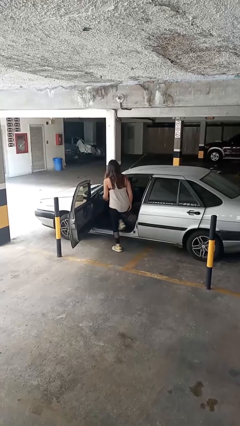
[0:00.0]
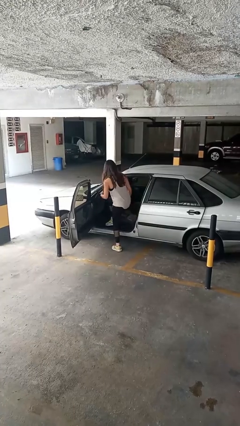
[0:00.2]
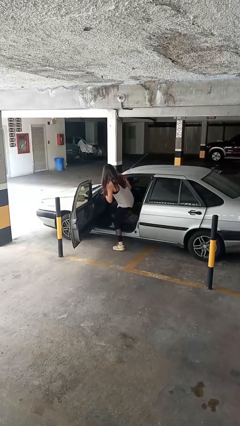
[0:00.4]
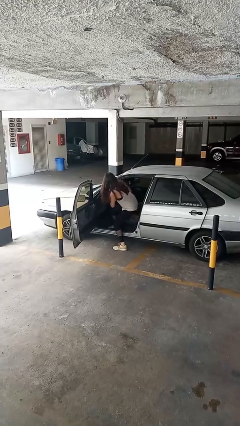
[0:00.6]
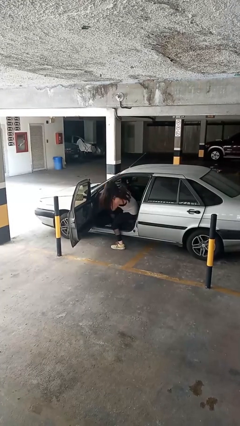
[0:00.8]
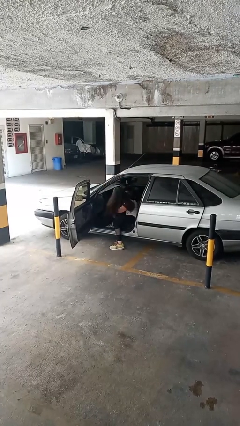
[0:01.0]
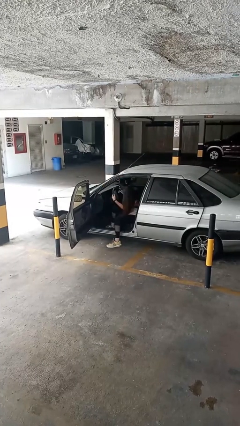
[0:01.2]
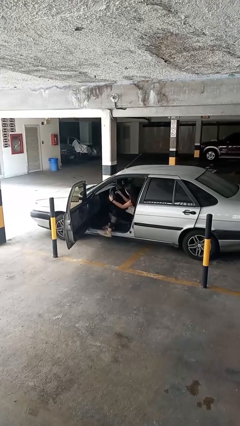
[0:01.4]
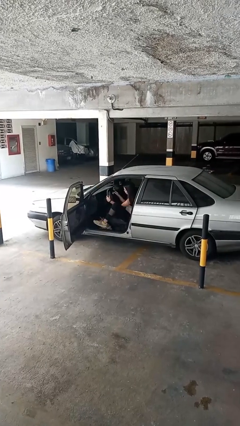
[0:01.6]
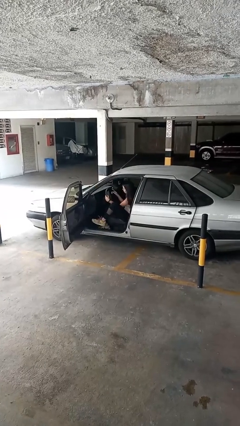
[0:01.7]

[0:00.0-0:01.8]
person enters car

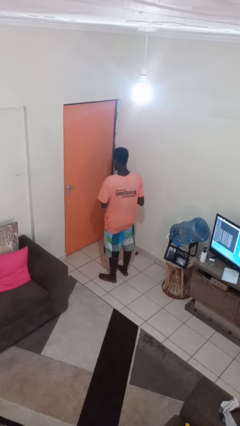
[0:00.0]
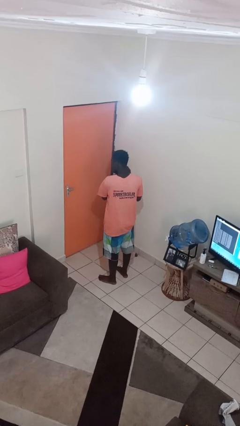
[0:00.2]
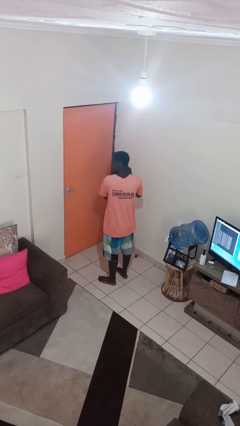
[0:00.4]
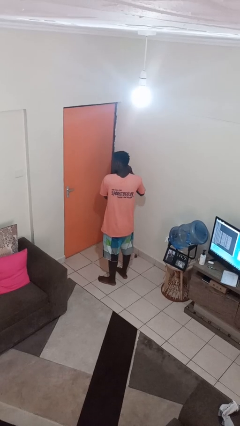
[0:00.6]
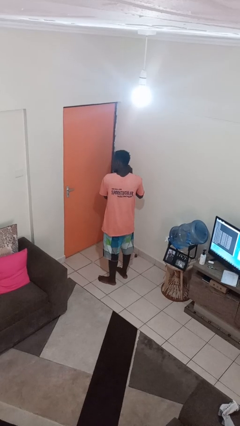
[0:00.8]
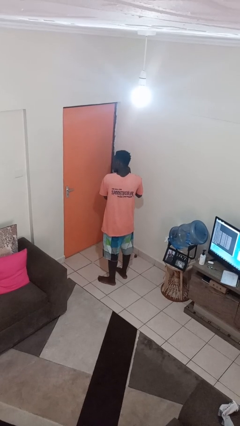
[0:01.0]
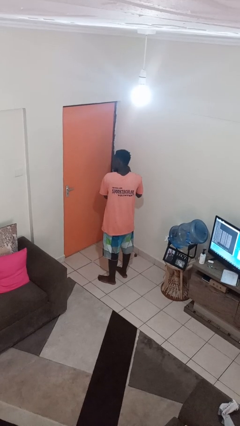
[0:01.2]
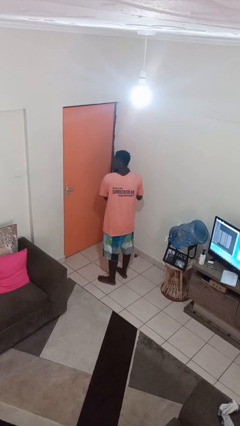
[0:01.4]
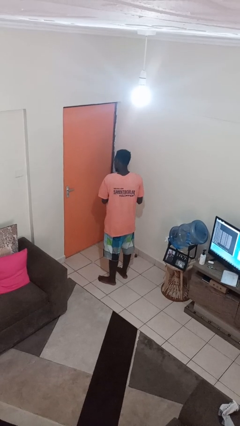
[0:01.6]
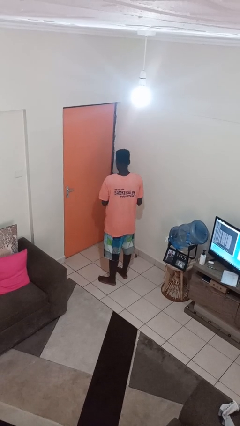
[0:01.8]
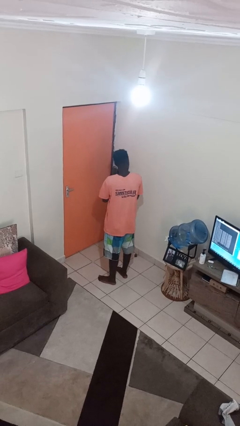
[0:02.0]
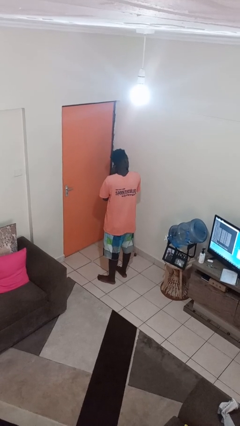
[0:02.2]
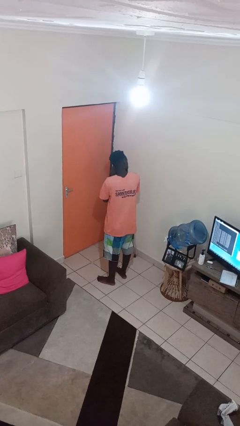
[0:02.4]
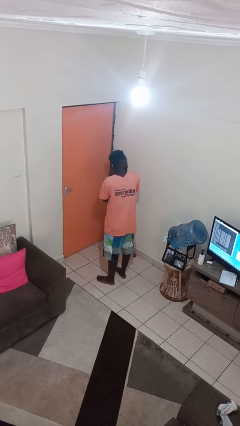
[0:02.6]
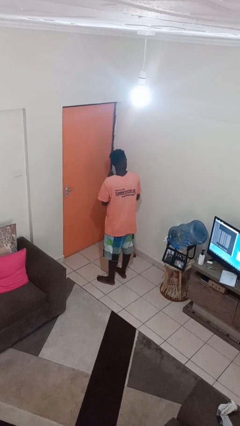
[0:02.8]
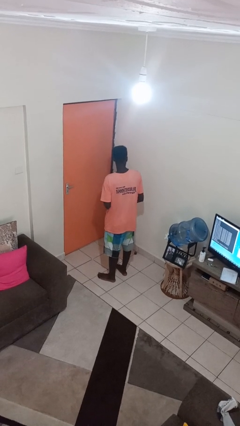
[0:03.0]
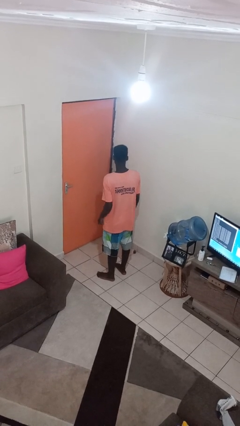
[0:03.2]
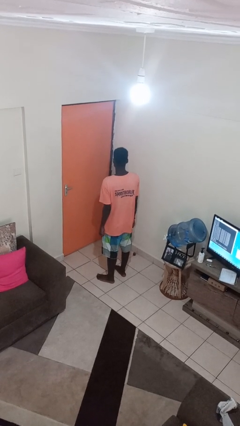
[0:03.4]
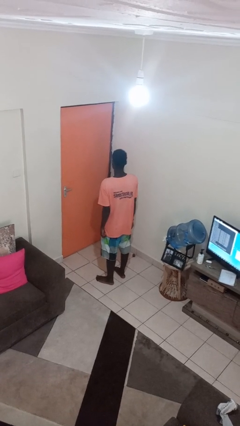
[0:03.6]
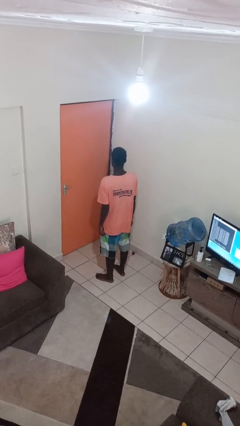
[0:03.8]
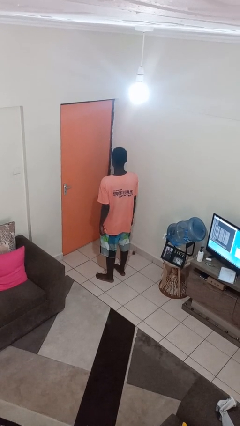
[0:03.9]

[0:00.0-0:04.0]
person takes off earrings

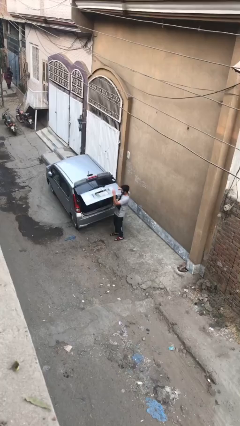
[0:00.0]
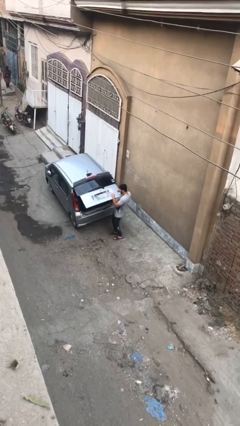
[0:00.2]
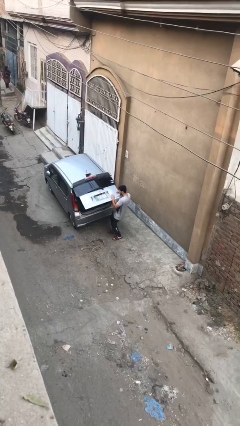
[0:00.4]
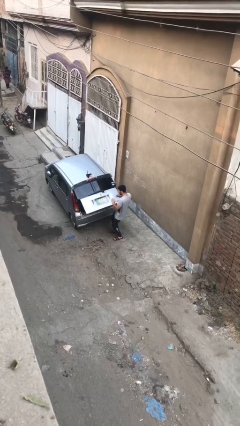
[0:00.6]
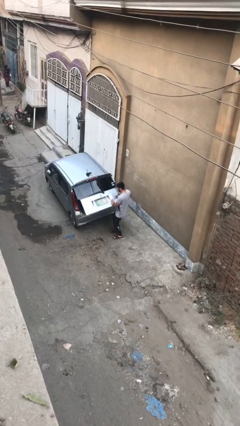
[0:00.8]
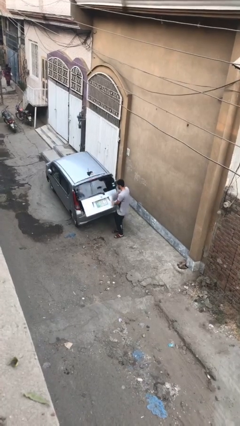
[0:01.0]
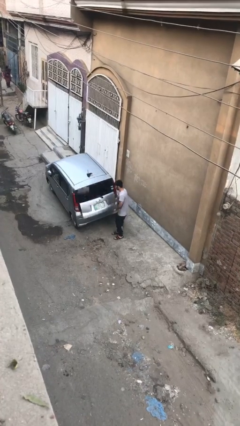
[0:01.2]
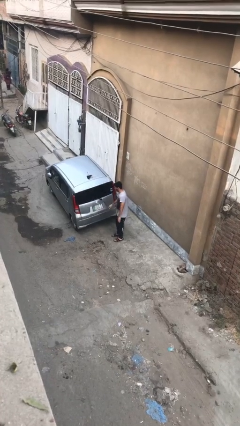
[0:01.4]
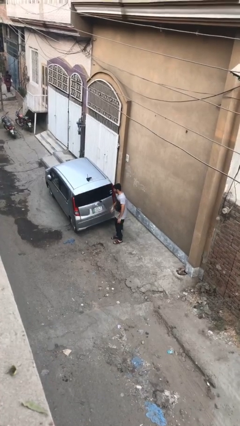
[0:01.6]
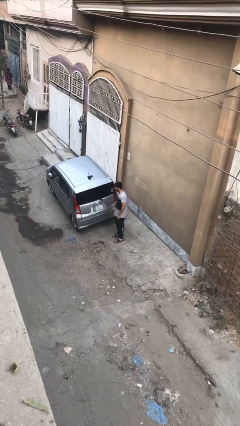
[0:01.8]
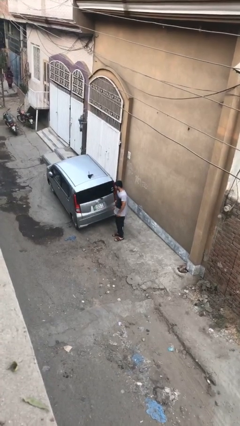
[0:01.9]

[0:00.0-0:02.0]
person closes car trunk

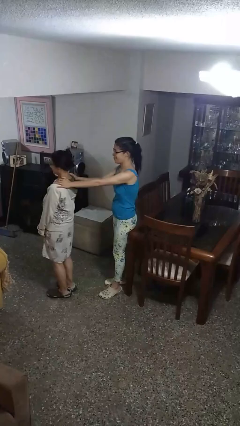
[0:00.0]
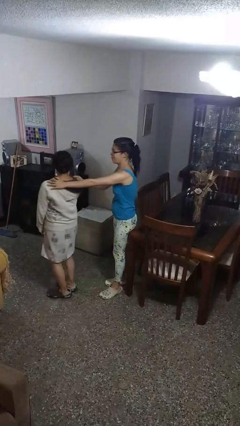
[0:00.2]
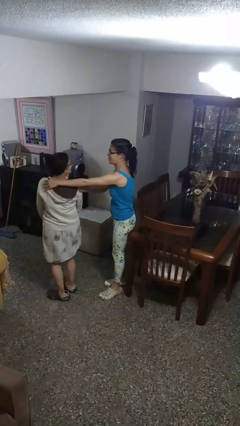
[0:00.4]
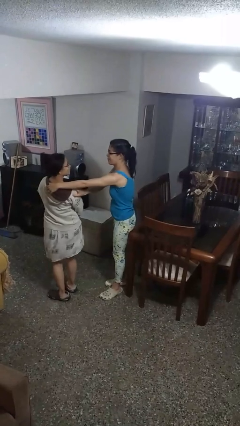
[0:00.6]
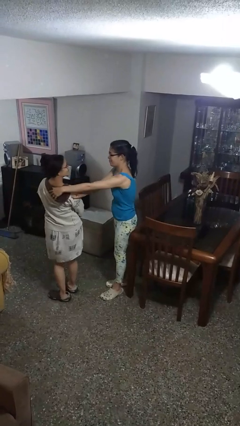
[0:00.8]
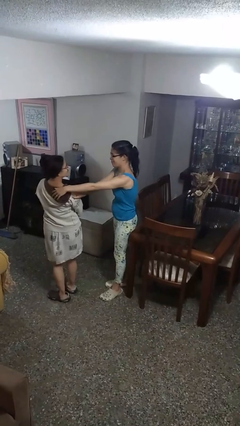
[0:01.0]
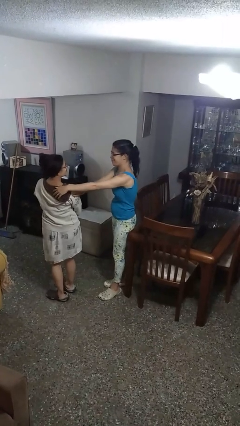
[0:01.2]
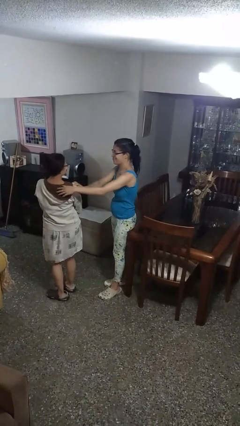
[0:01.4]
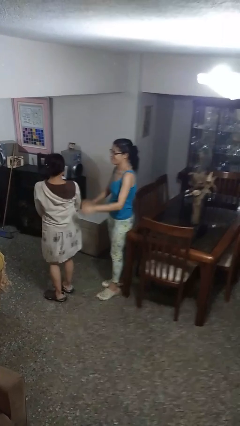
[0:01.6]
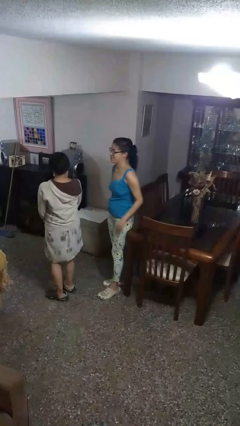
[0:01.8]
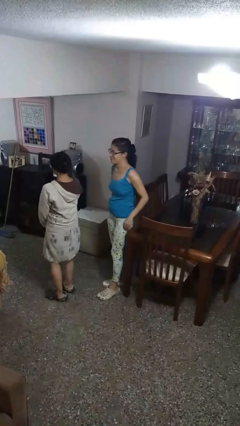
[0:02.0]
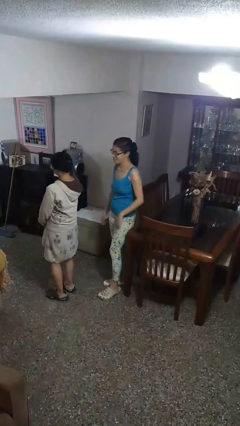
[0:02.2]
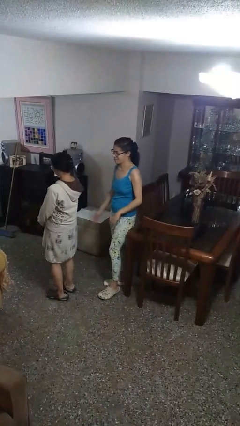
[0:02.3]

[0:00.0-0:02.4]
person spins person around

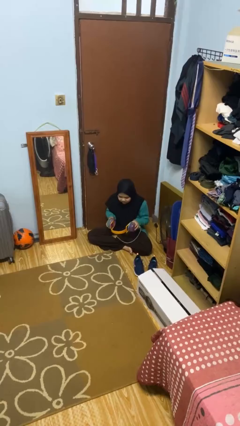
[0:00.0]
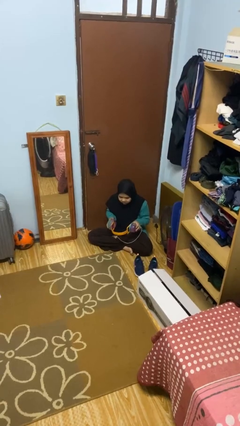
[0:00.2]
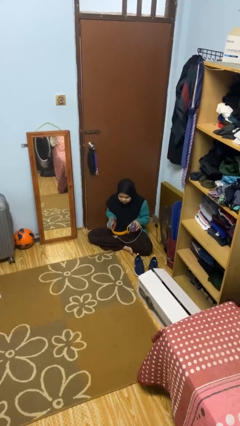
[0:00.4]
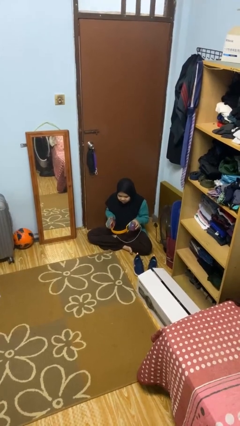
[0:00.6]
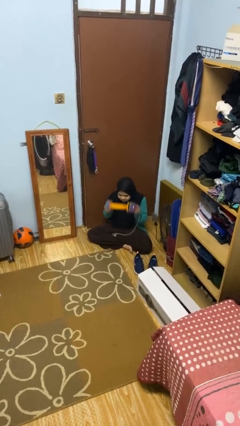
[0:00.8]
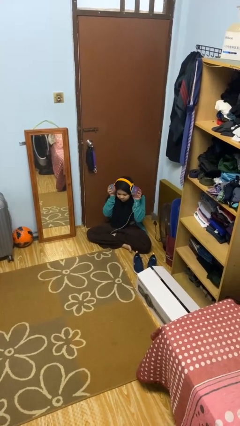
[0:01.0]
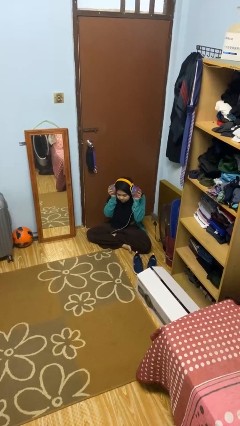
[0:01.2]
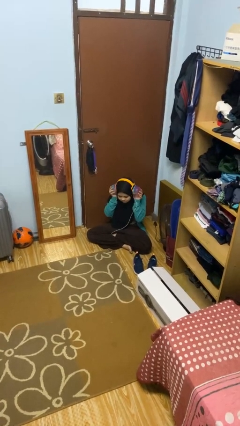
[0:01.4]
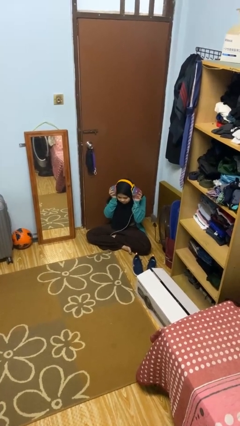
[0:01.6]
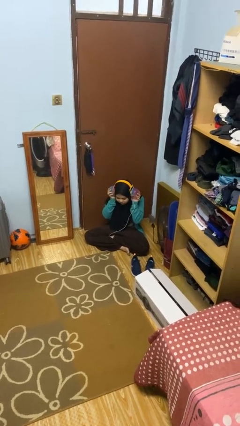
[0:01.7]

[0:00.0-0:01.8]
person puts on headphones

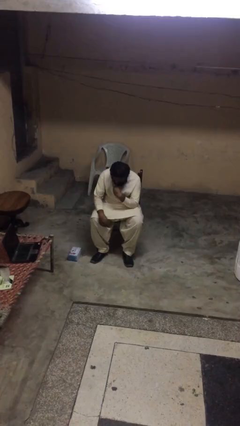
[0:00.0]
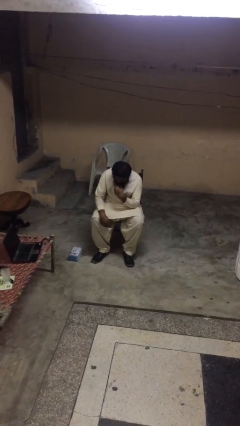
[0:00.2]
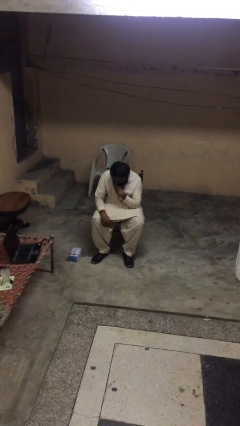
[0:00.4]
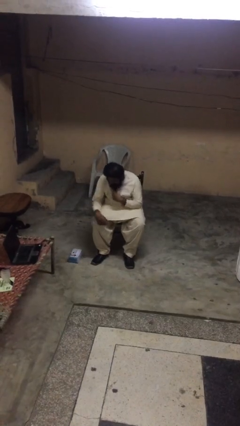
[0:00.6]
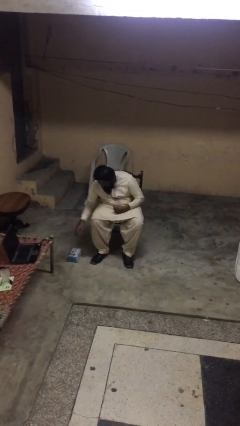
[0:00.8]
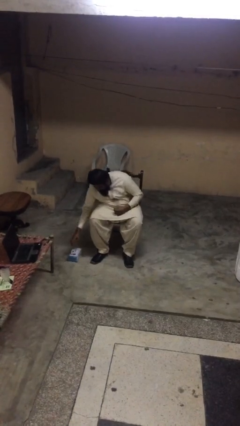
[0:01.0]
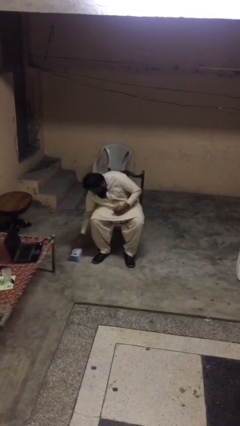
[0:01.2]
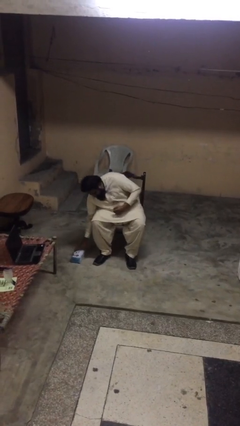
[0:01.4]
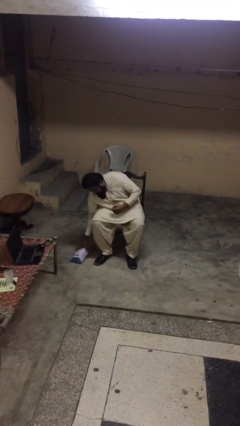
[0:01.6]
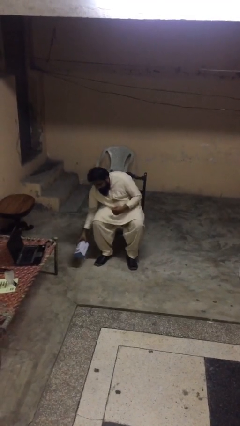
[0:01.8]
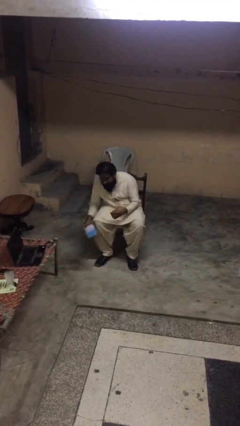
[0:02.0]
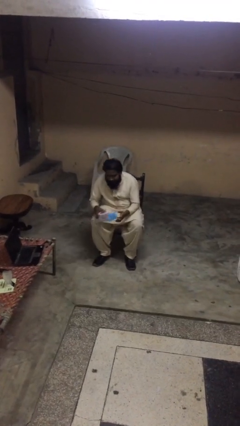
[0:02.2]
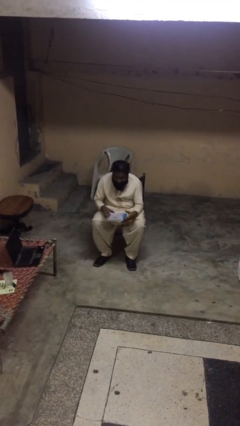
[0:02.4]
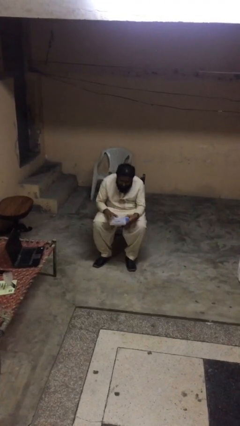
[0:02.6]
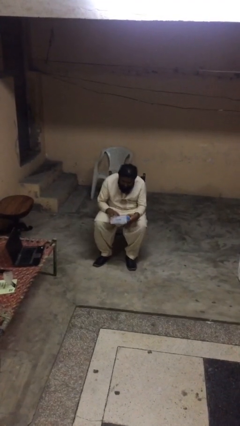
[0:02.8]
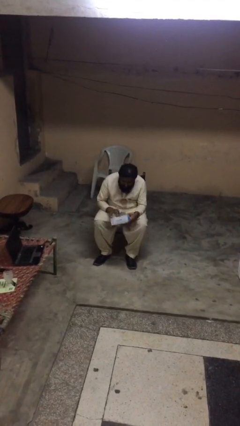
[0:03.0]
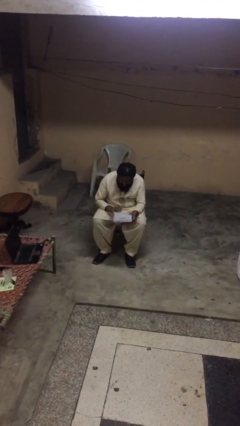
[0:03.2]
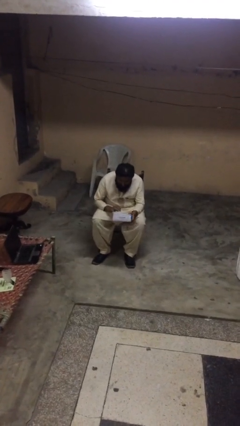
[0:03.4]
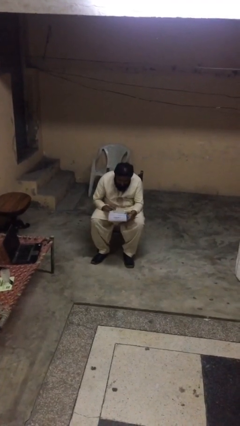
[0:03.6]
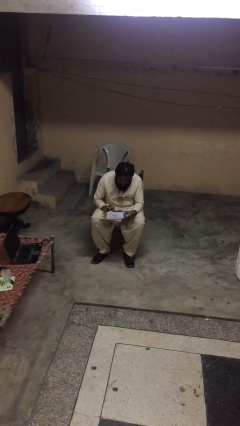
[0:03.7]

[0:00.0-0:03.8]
person picks up object from floor

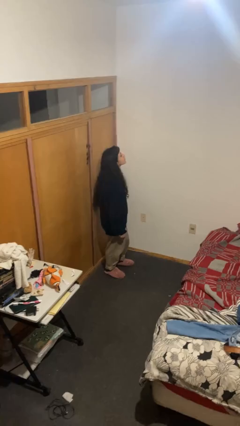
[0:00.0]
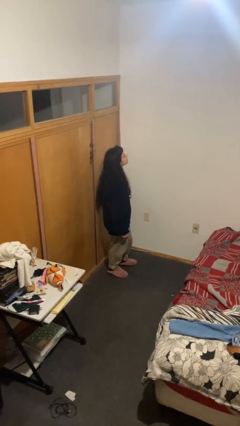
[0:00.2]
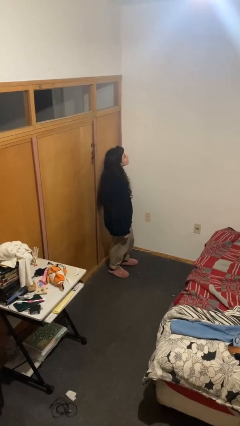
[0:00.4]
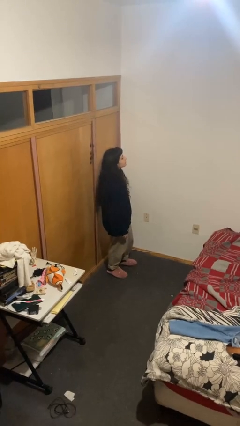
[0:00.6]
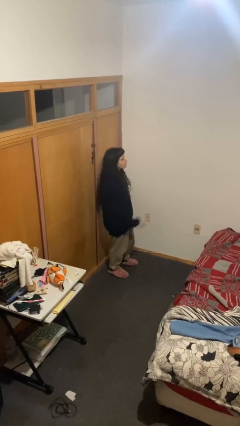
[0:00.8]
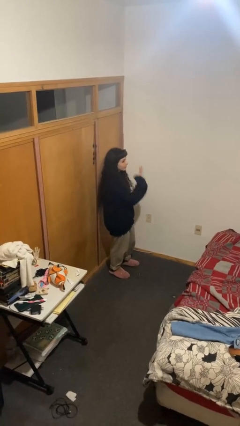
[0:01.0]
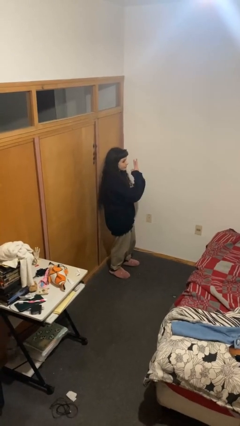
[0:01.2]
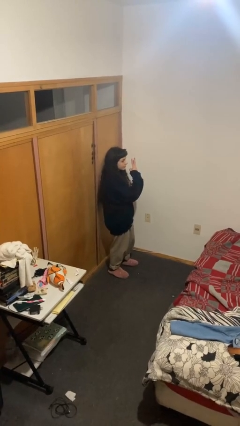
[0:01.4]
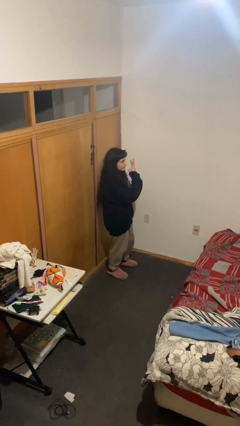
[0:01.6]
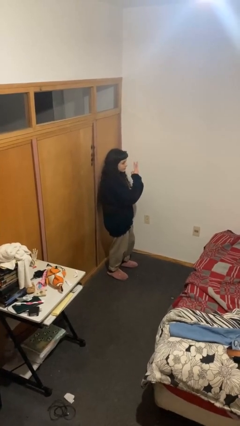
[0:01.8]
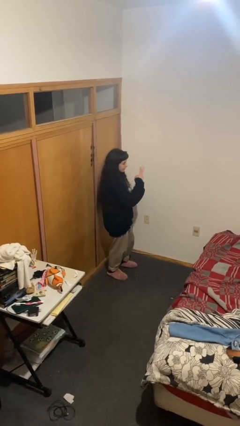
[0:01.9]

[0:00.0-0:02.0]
person gestures number three
